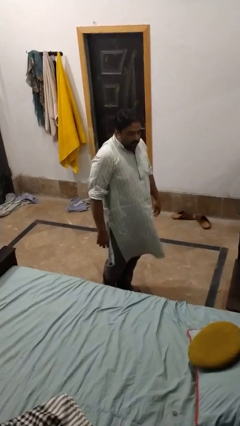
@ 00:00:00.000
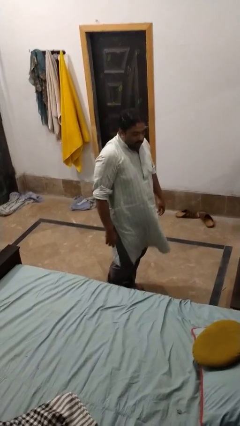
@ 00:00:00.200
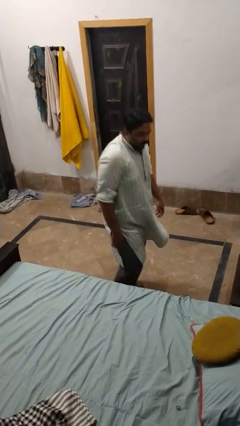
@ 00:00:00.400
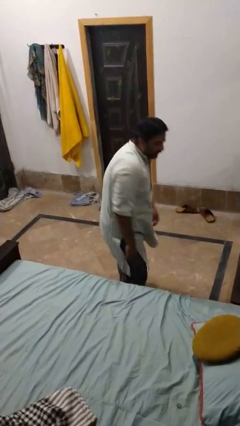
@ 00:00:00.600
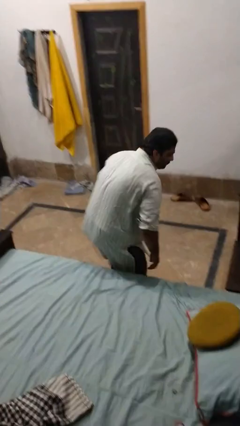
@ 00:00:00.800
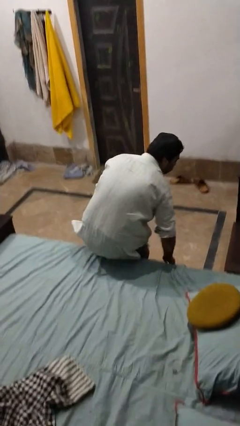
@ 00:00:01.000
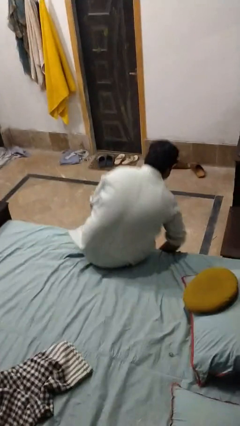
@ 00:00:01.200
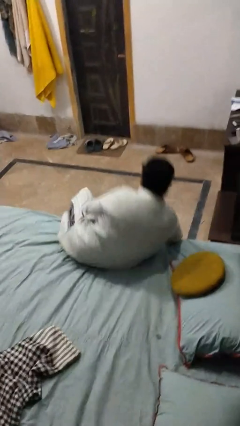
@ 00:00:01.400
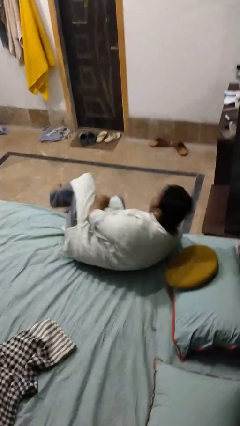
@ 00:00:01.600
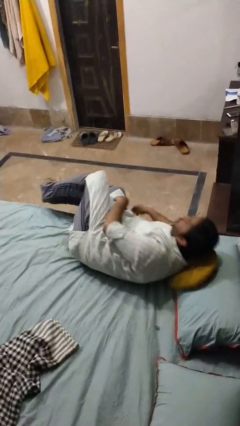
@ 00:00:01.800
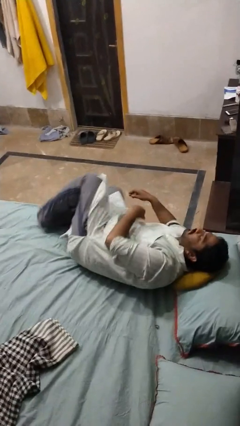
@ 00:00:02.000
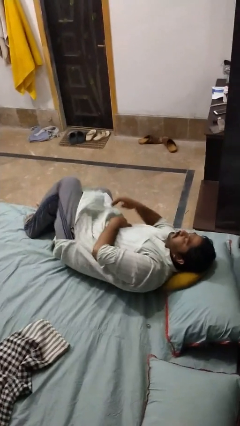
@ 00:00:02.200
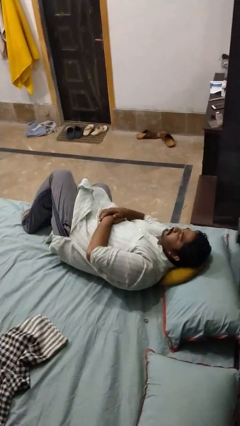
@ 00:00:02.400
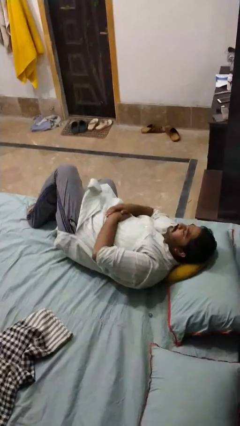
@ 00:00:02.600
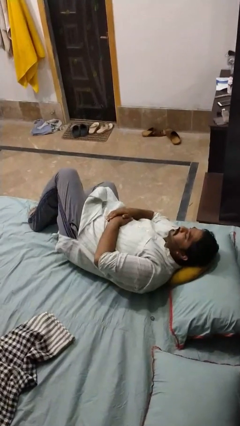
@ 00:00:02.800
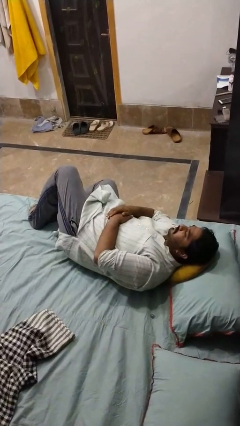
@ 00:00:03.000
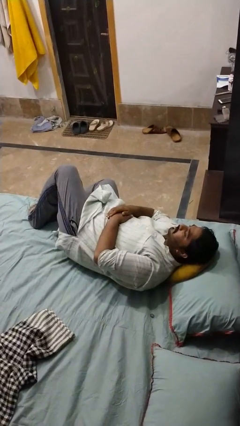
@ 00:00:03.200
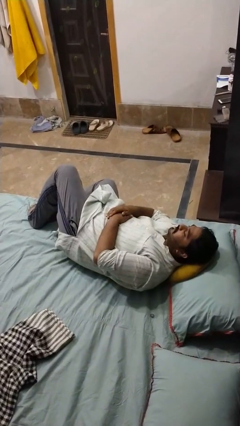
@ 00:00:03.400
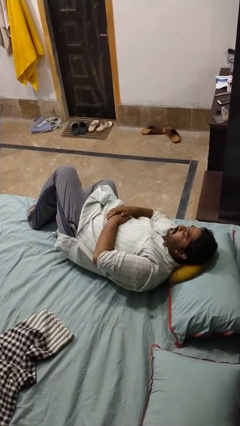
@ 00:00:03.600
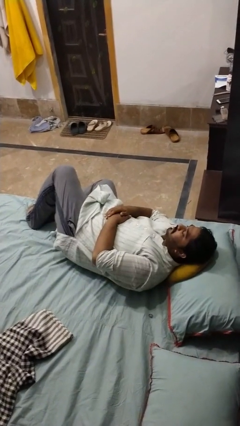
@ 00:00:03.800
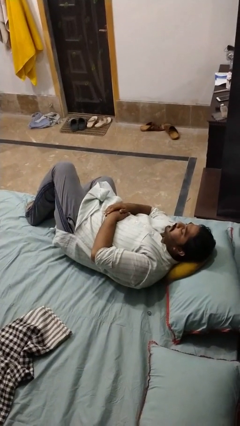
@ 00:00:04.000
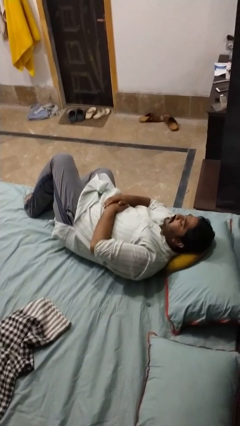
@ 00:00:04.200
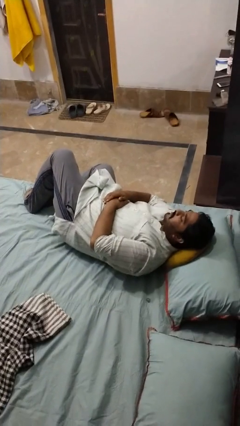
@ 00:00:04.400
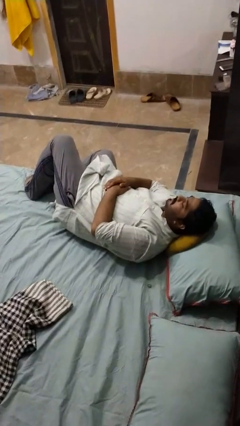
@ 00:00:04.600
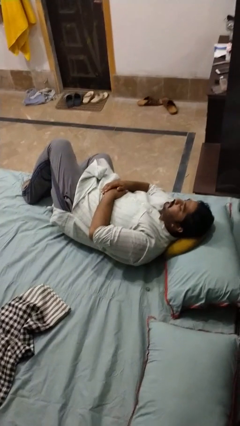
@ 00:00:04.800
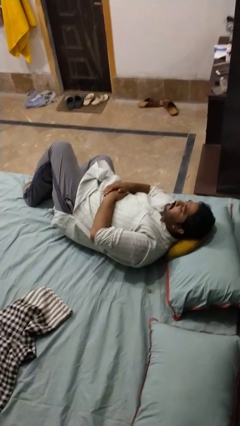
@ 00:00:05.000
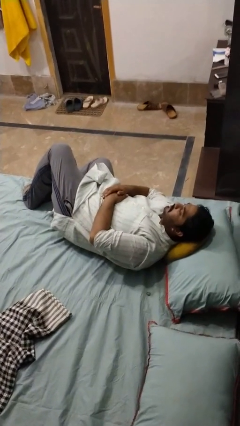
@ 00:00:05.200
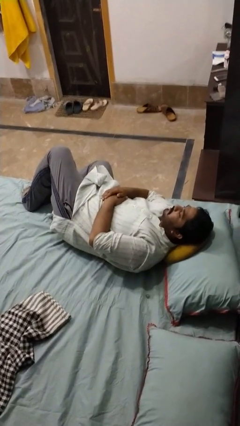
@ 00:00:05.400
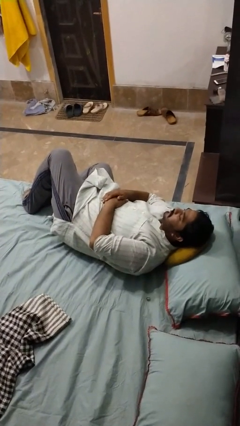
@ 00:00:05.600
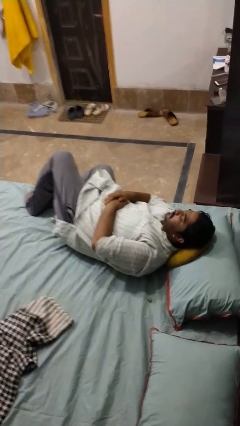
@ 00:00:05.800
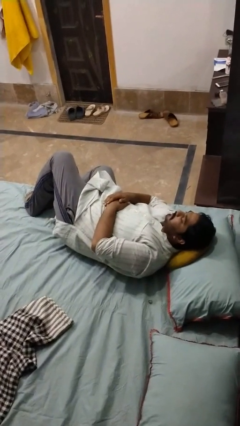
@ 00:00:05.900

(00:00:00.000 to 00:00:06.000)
person lies down on bed

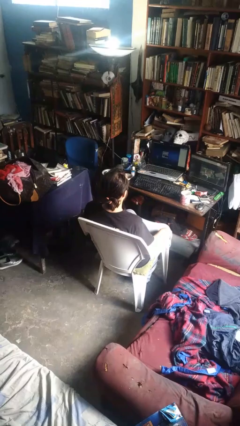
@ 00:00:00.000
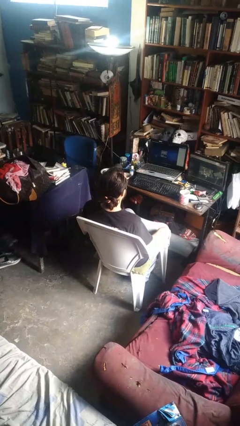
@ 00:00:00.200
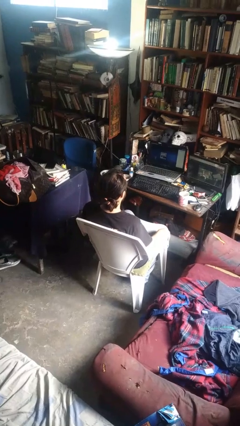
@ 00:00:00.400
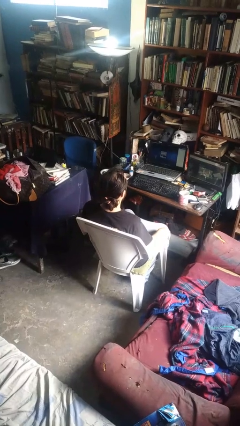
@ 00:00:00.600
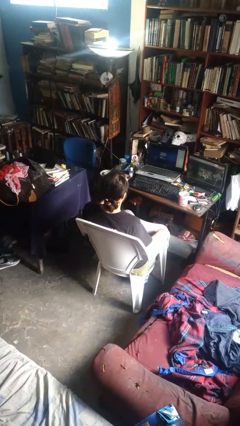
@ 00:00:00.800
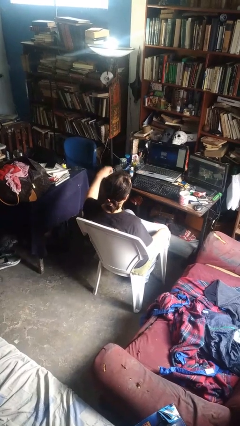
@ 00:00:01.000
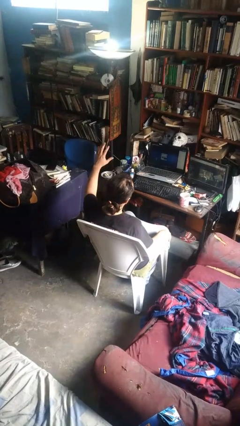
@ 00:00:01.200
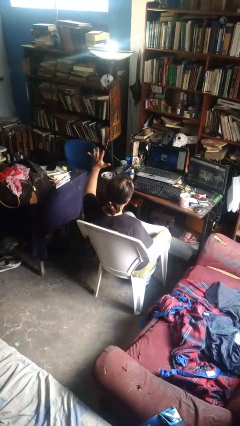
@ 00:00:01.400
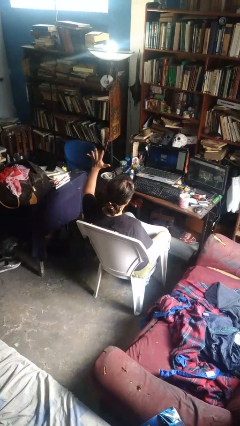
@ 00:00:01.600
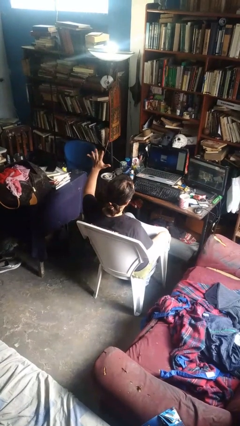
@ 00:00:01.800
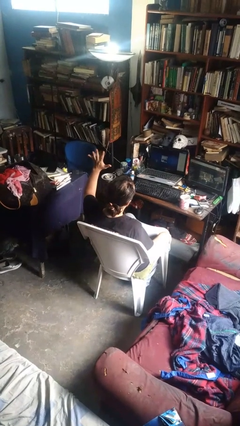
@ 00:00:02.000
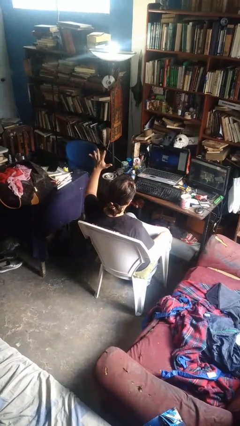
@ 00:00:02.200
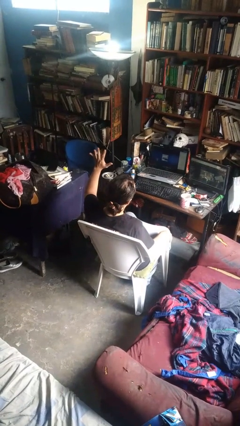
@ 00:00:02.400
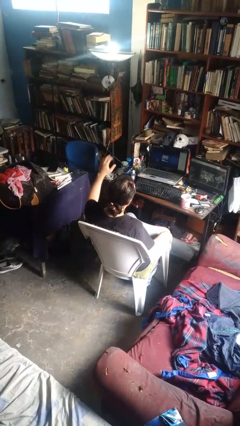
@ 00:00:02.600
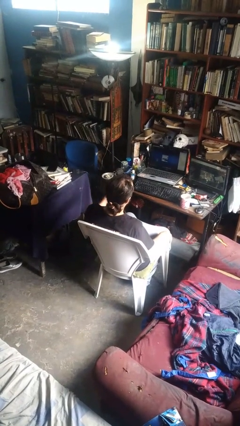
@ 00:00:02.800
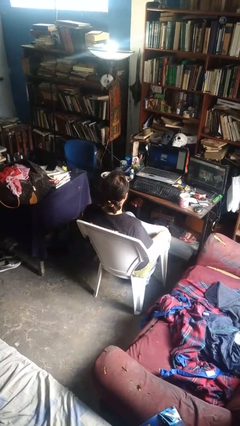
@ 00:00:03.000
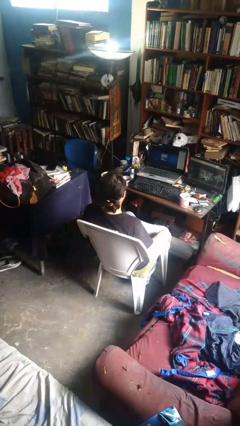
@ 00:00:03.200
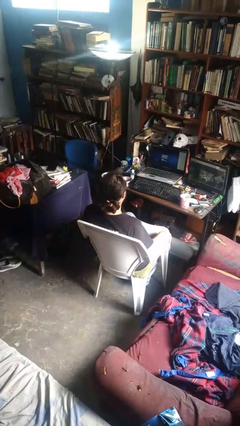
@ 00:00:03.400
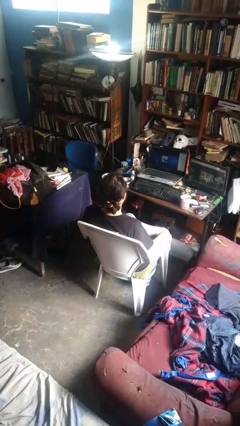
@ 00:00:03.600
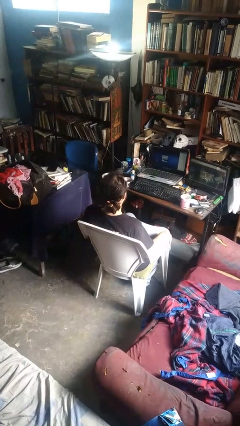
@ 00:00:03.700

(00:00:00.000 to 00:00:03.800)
person gestures number five

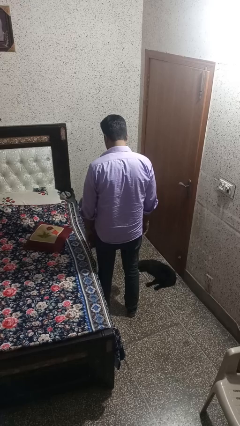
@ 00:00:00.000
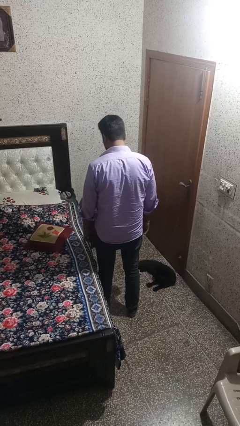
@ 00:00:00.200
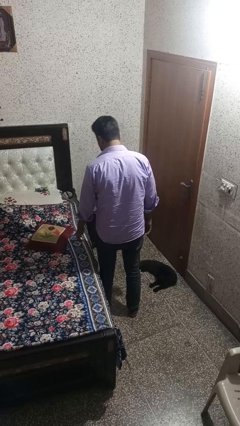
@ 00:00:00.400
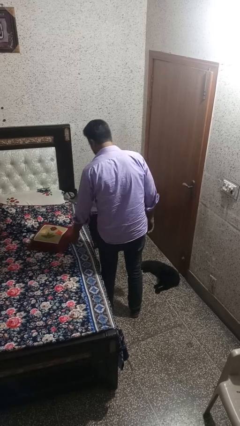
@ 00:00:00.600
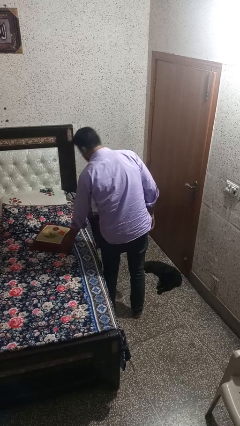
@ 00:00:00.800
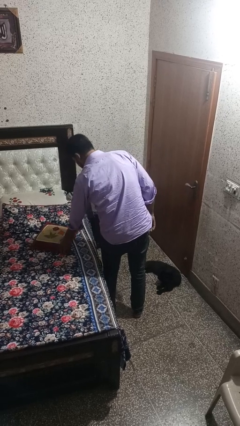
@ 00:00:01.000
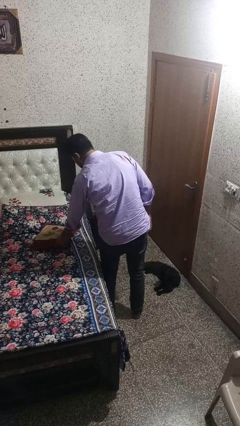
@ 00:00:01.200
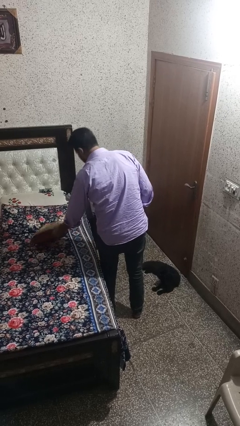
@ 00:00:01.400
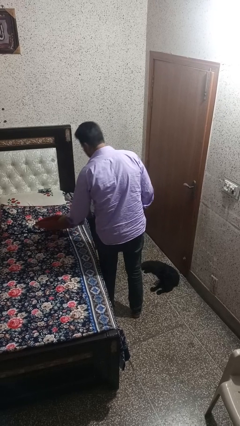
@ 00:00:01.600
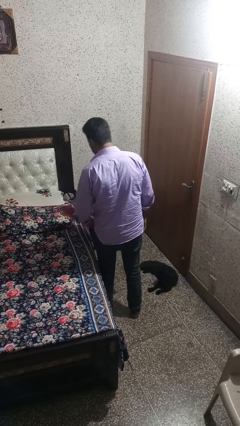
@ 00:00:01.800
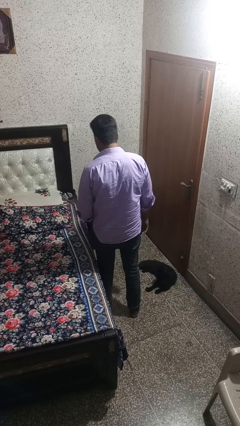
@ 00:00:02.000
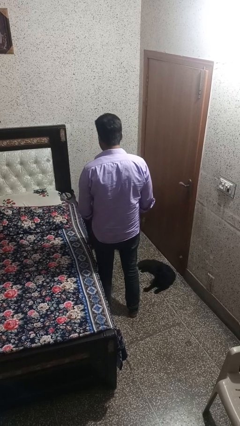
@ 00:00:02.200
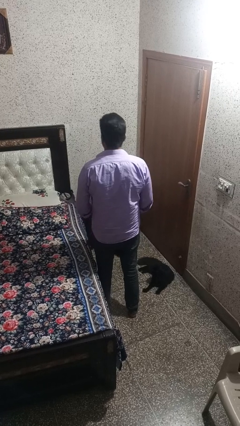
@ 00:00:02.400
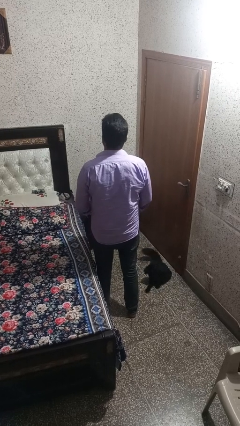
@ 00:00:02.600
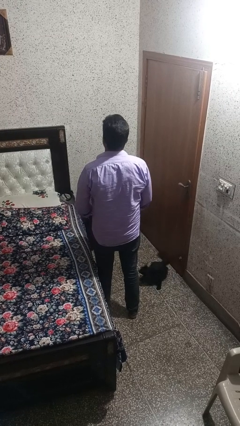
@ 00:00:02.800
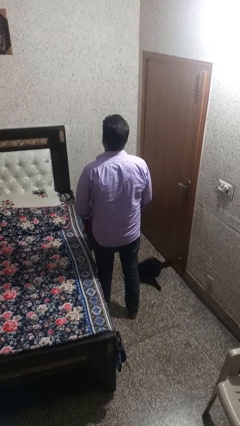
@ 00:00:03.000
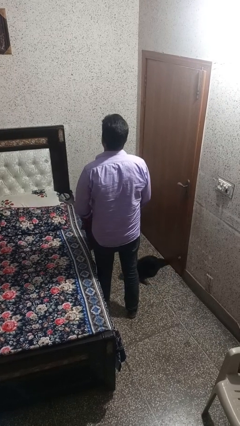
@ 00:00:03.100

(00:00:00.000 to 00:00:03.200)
person picks up object from bed

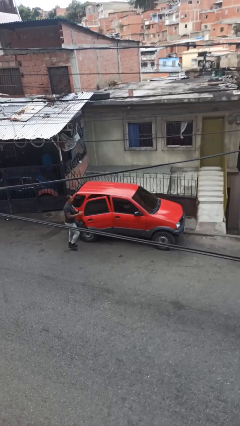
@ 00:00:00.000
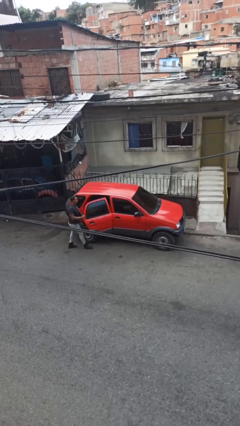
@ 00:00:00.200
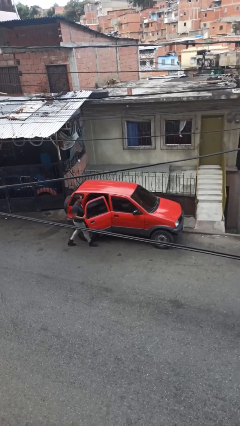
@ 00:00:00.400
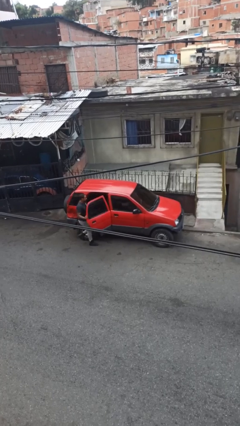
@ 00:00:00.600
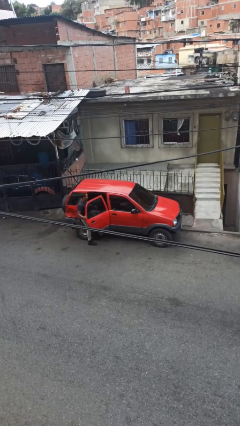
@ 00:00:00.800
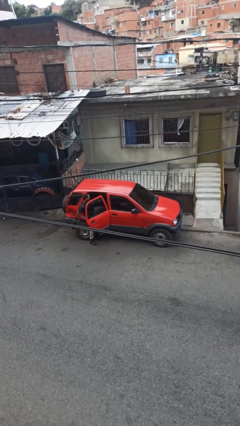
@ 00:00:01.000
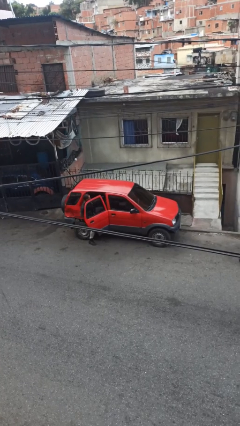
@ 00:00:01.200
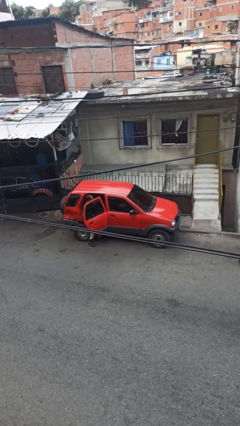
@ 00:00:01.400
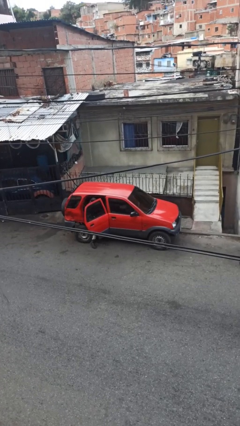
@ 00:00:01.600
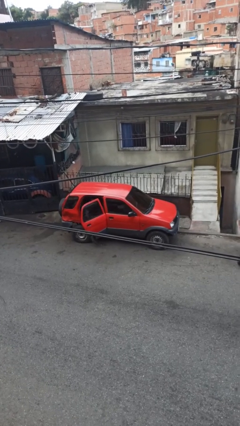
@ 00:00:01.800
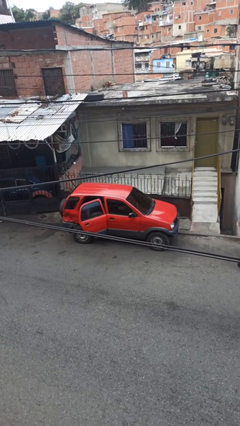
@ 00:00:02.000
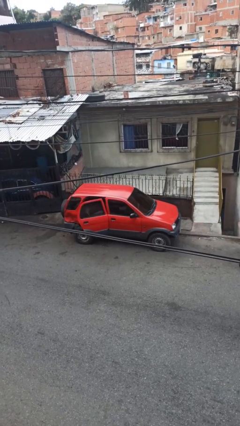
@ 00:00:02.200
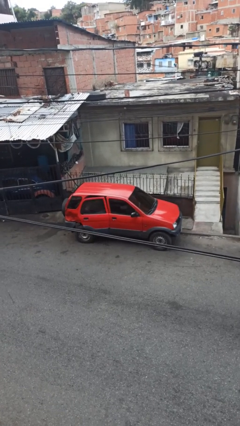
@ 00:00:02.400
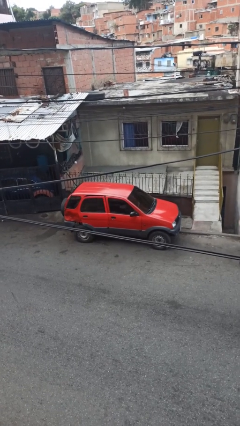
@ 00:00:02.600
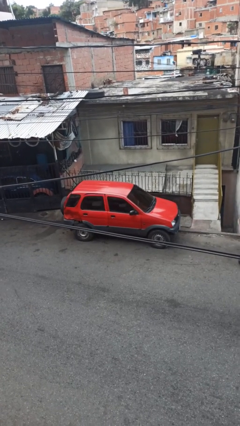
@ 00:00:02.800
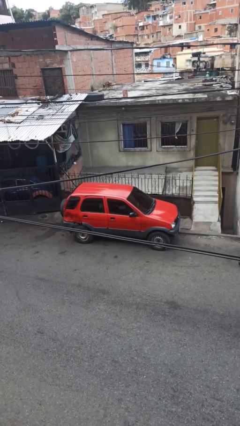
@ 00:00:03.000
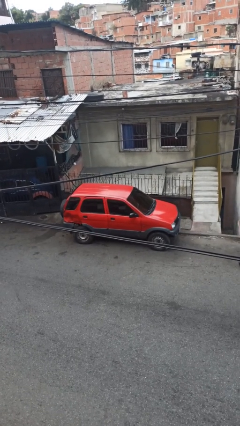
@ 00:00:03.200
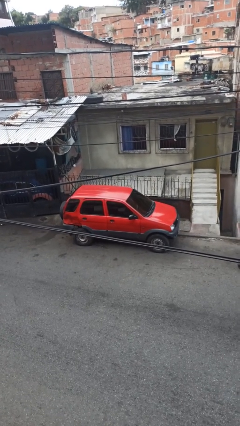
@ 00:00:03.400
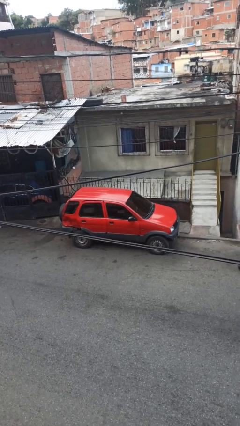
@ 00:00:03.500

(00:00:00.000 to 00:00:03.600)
car picks up person

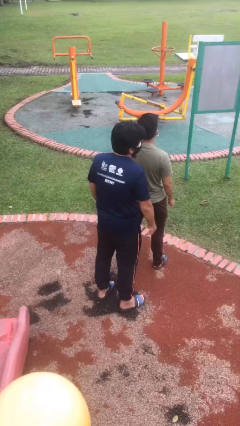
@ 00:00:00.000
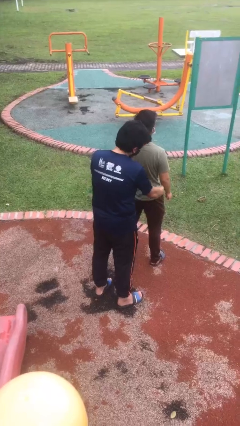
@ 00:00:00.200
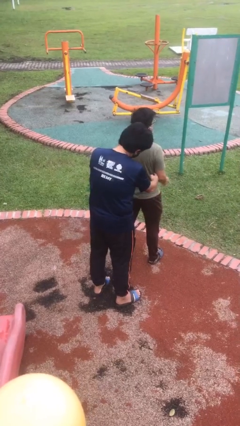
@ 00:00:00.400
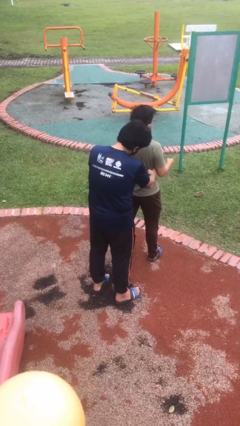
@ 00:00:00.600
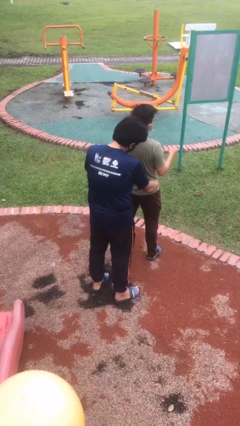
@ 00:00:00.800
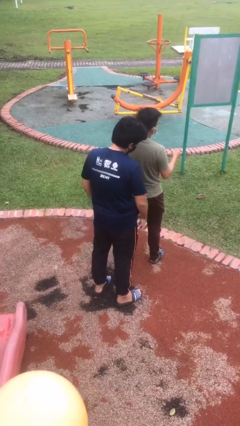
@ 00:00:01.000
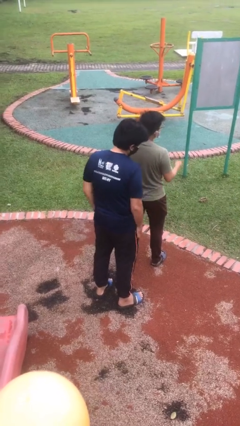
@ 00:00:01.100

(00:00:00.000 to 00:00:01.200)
person tickles person

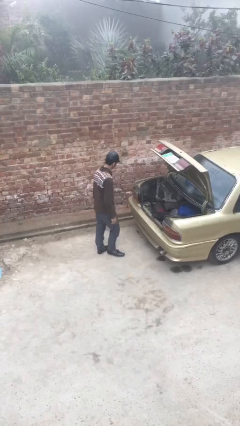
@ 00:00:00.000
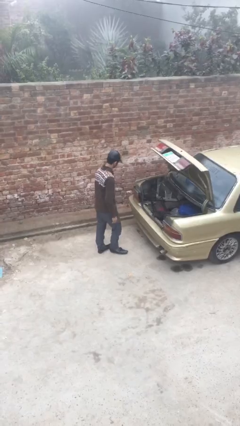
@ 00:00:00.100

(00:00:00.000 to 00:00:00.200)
person unloads car
